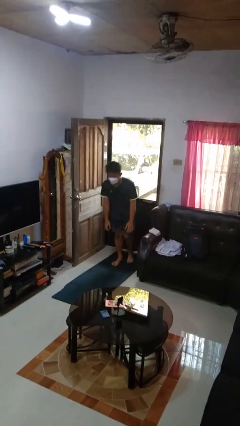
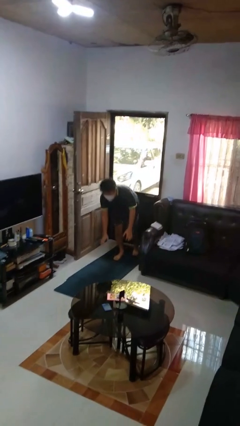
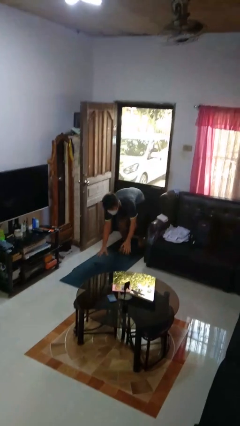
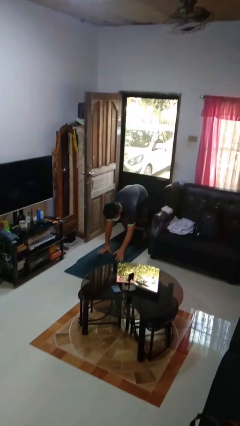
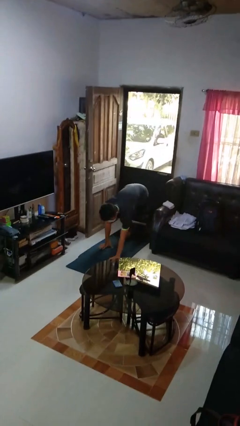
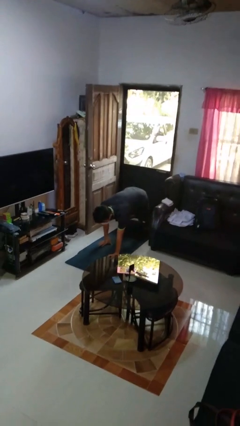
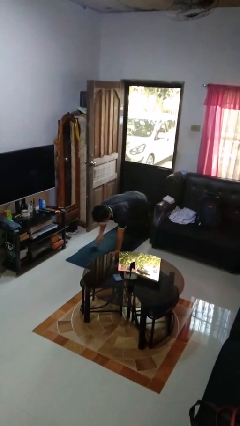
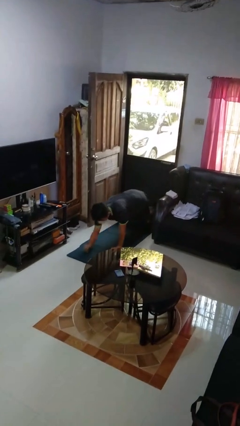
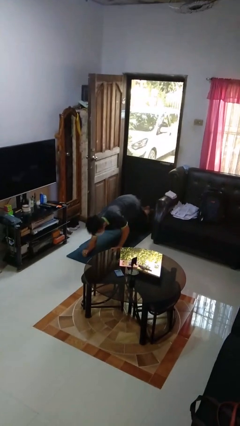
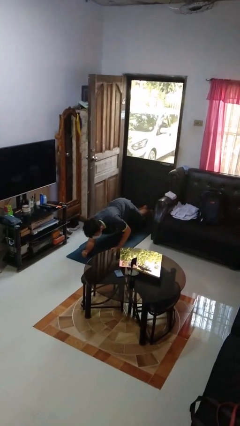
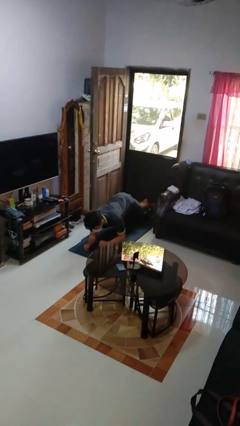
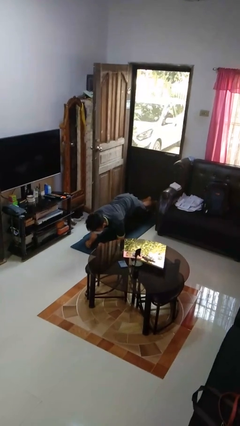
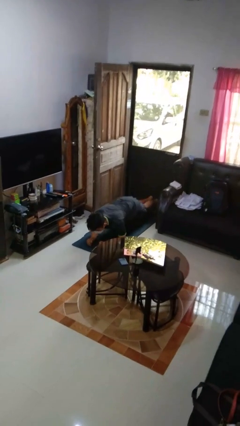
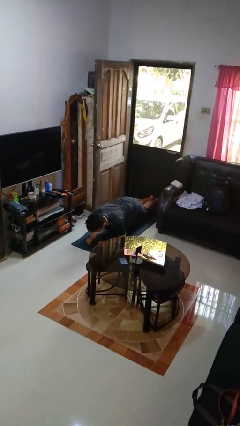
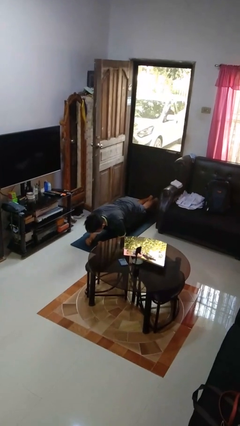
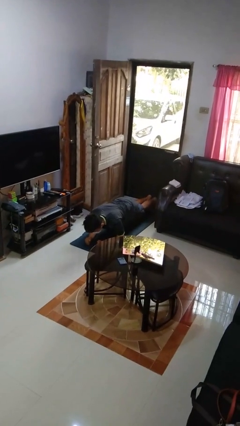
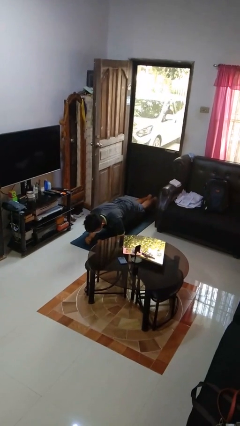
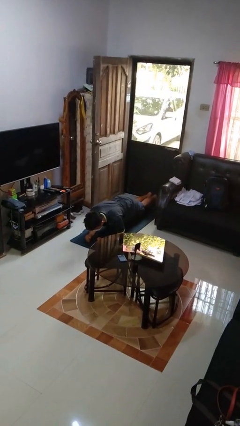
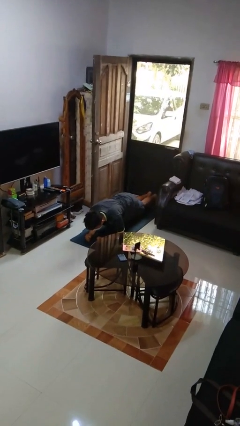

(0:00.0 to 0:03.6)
person exercises with plank

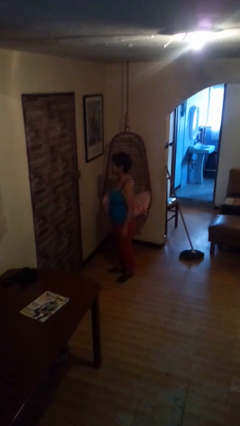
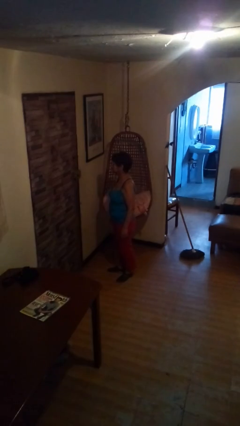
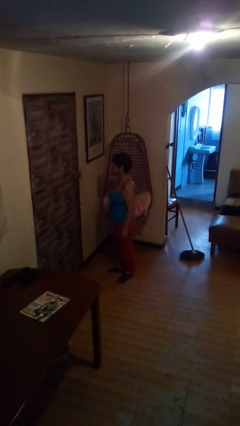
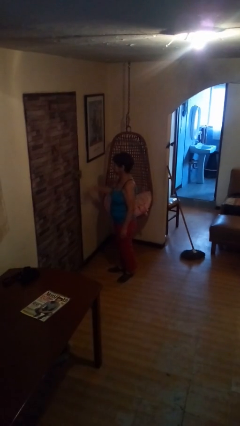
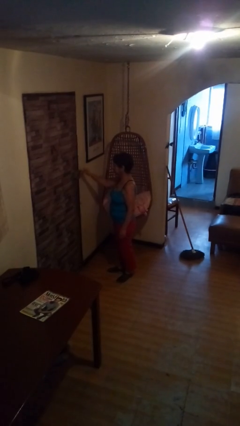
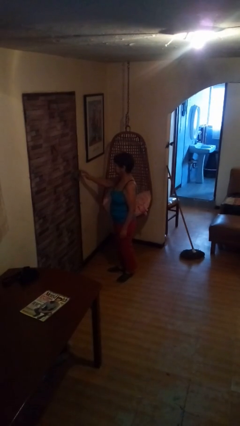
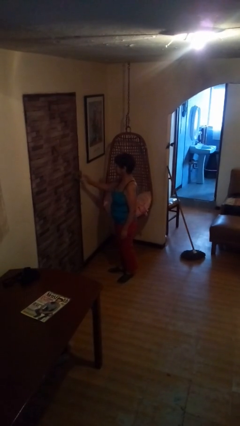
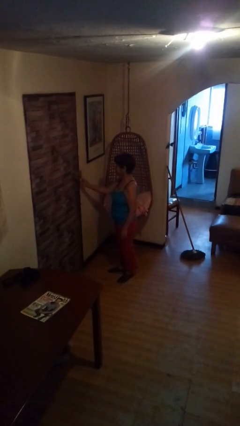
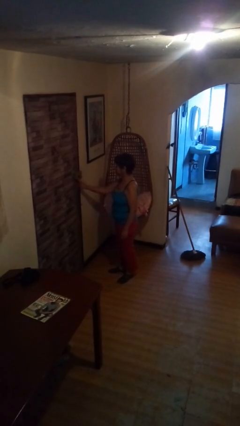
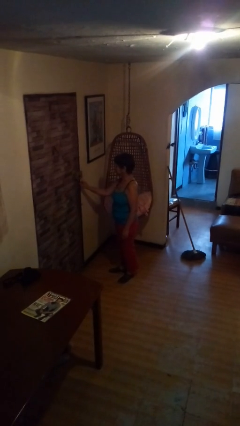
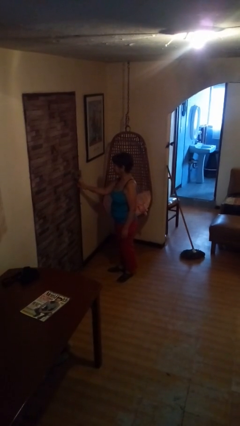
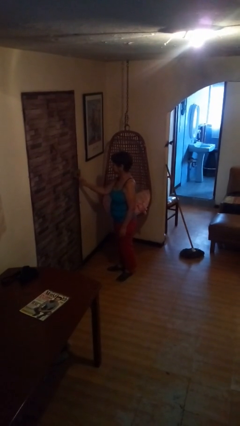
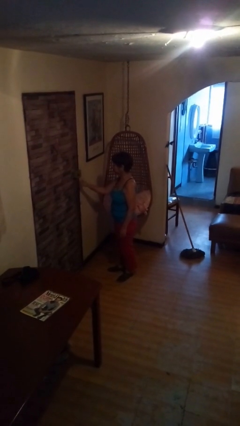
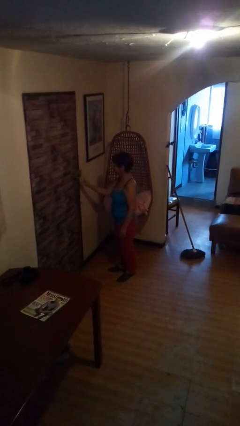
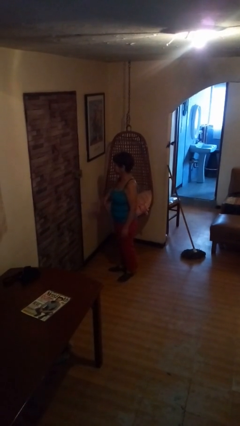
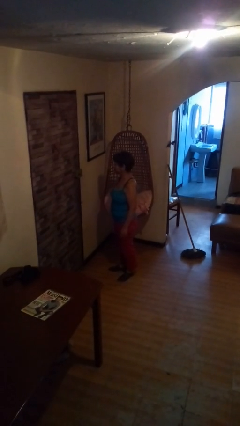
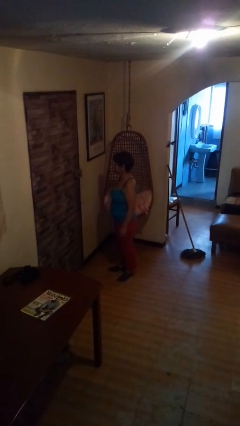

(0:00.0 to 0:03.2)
person taps object with finger

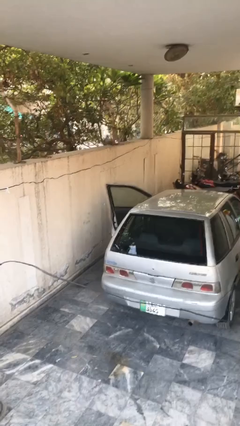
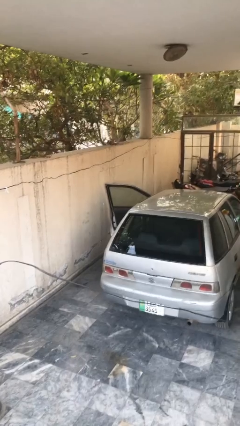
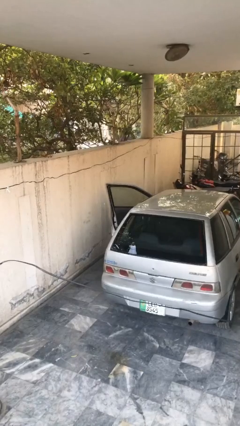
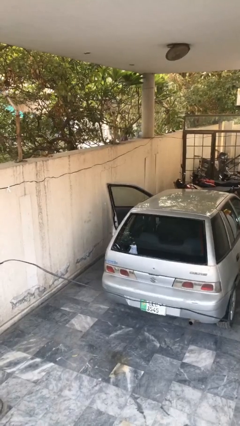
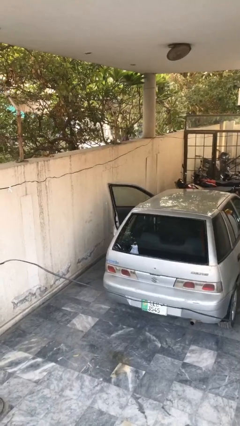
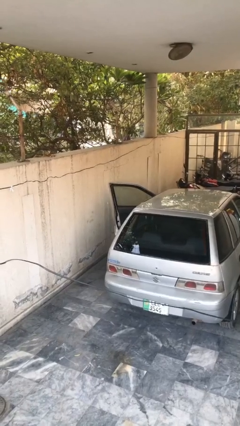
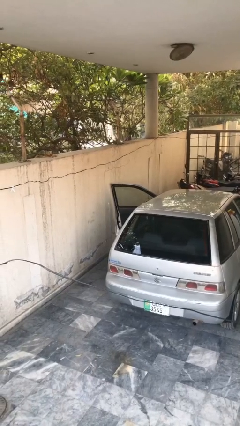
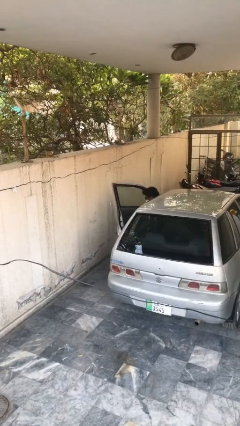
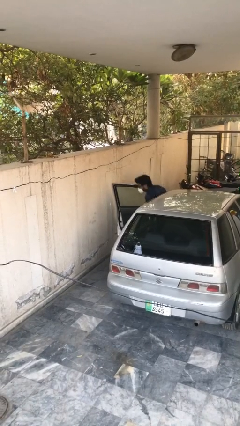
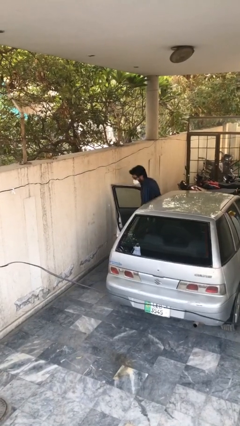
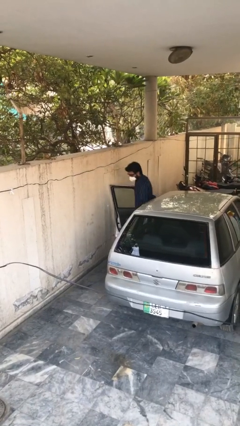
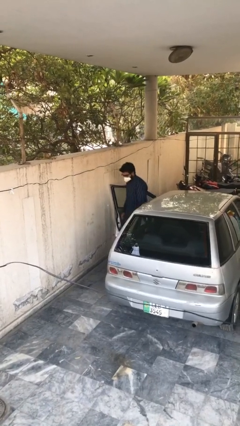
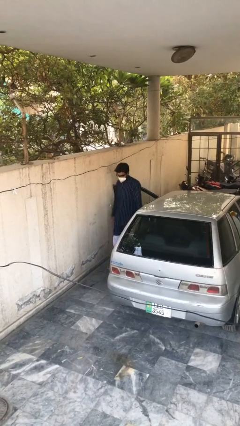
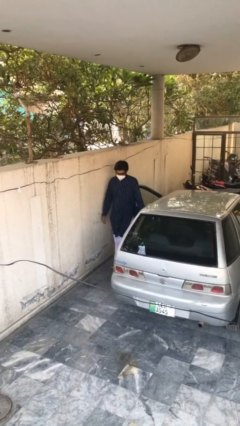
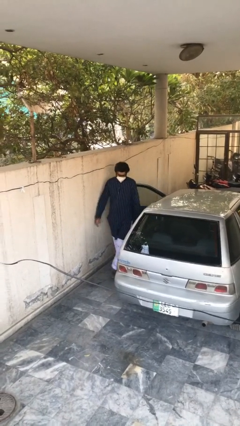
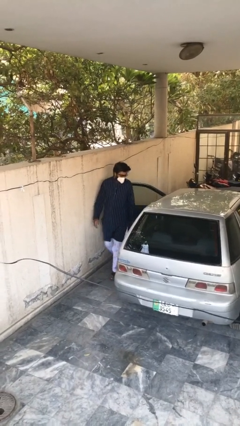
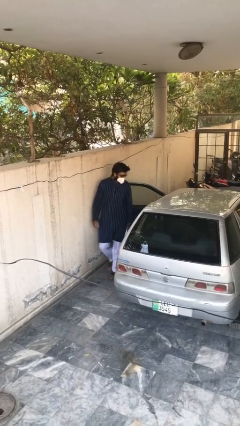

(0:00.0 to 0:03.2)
person exits car

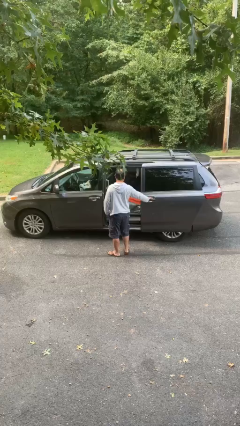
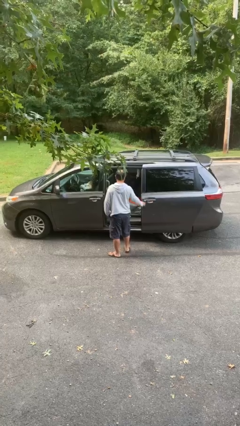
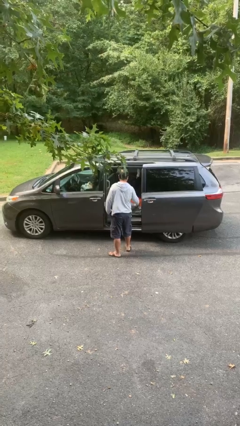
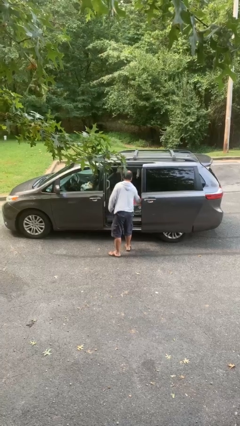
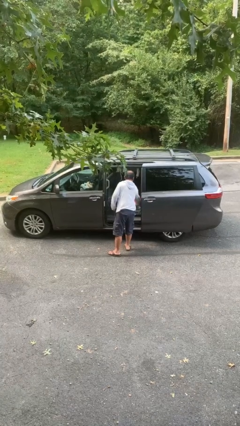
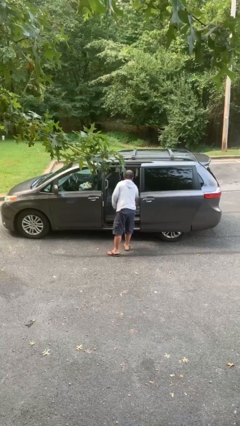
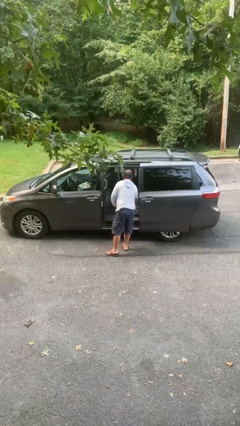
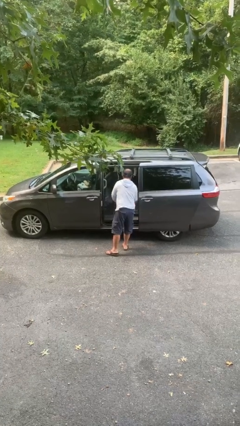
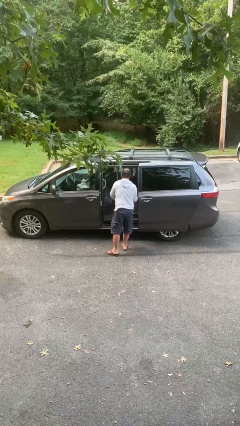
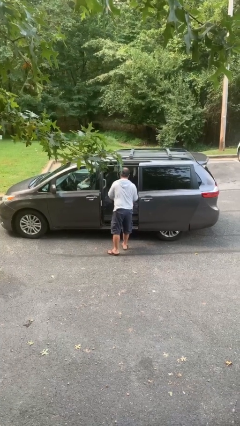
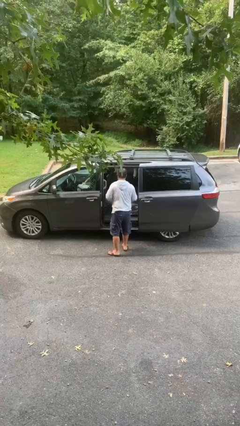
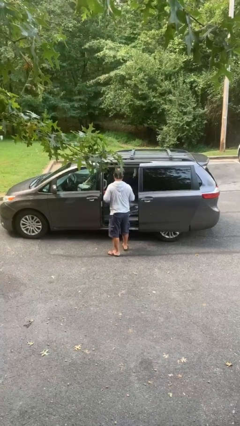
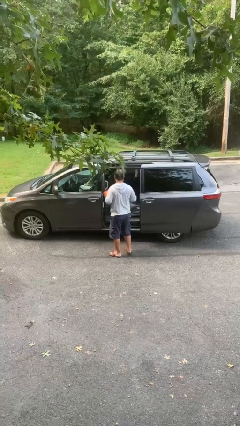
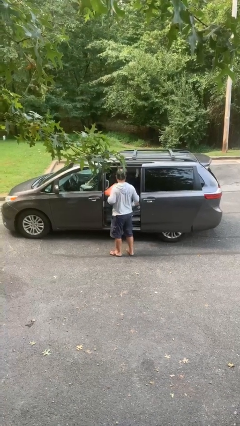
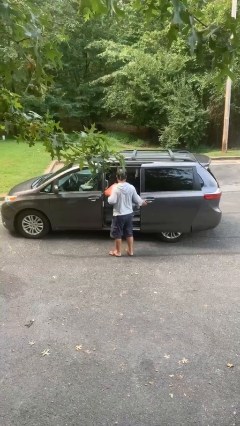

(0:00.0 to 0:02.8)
person unloads car

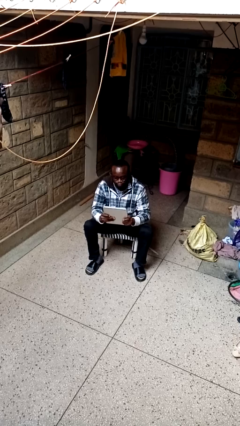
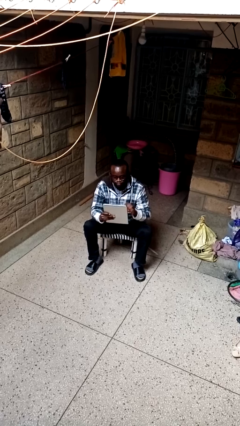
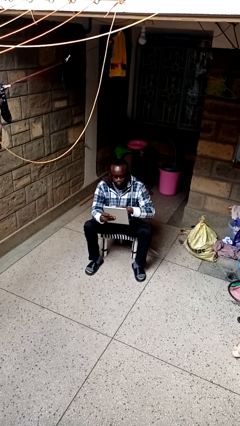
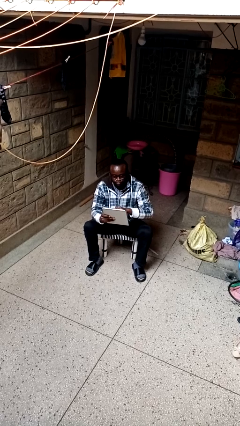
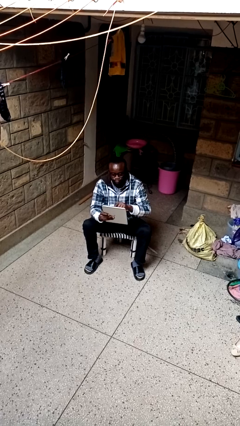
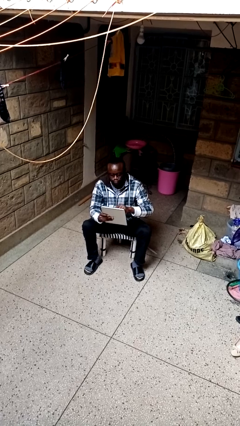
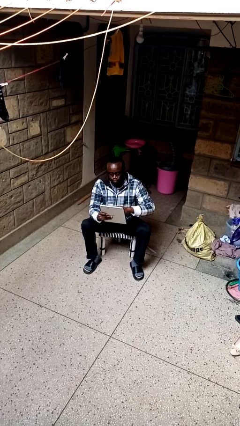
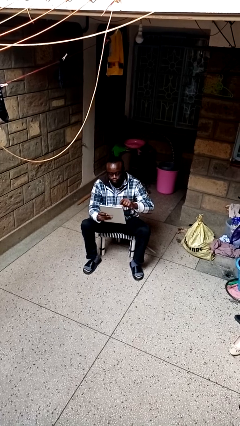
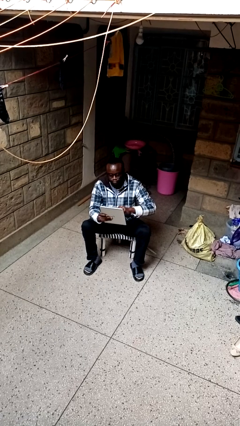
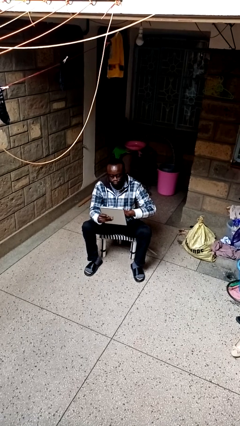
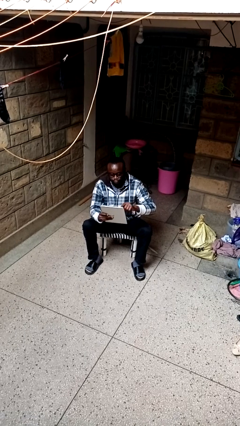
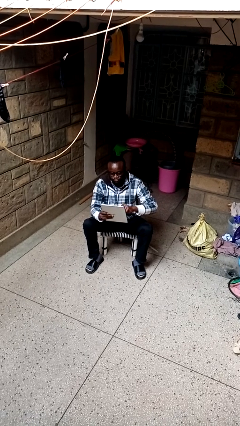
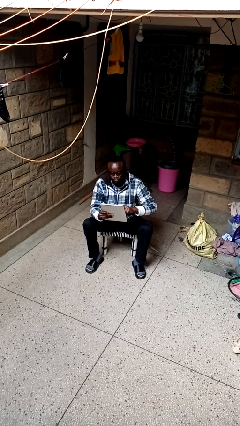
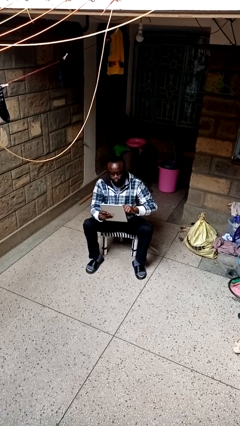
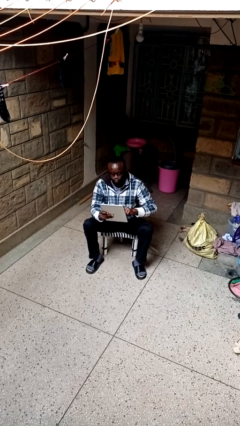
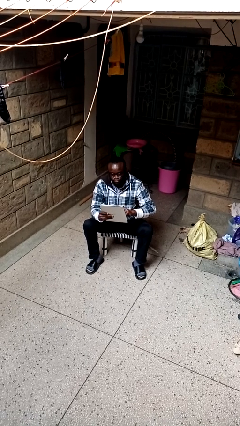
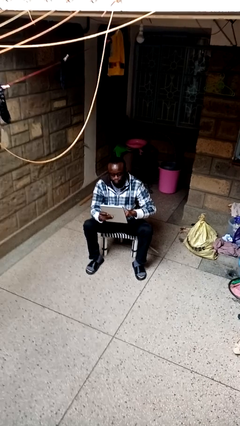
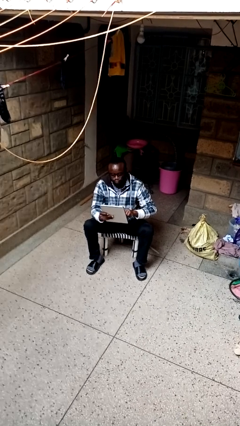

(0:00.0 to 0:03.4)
person interacts with tablet

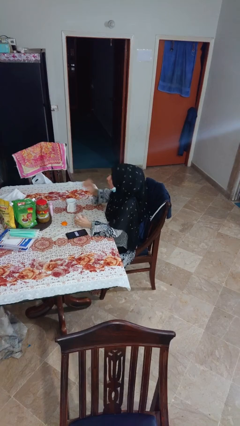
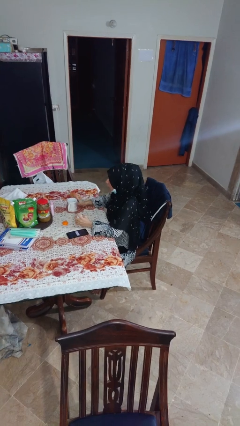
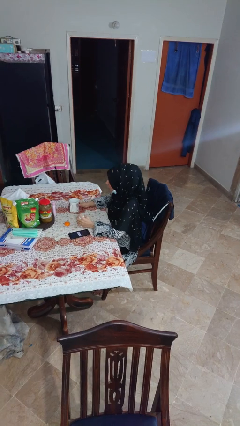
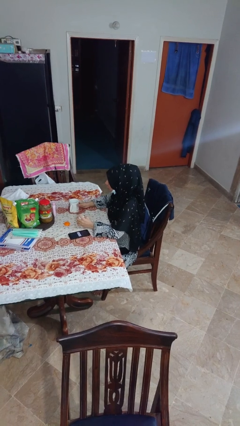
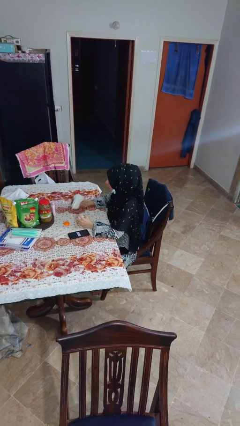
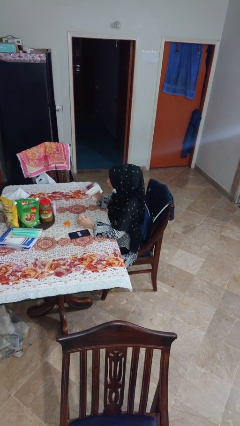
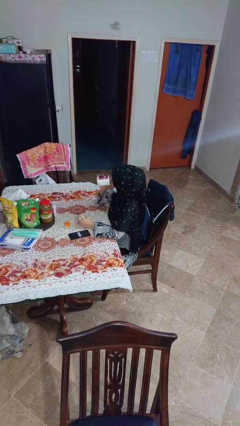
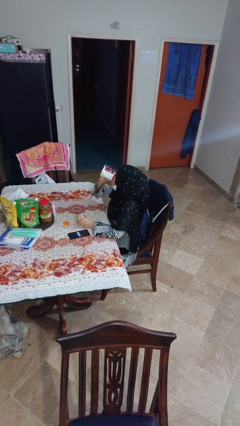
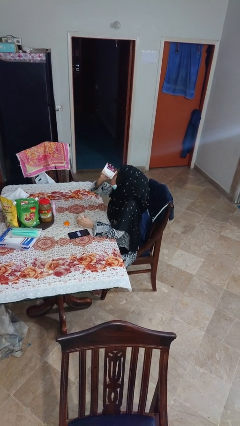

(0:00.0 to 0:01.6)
person drinks from cup
